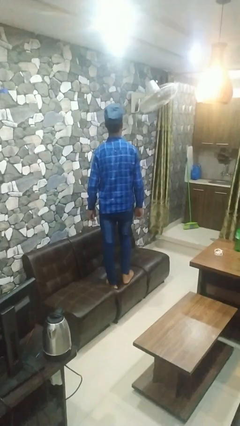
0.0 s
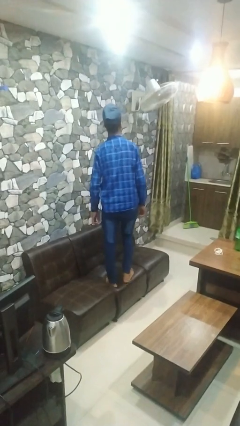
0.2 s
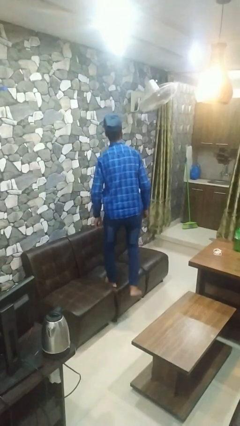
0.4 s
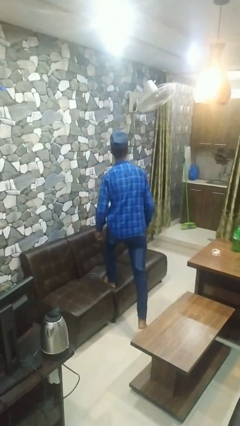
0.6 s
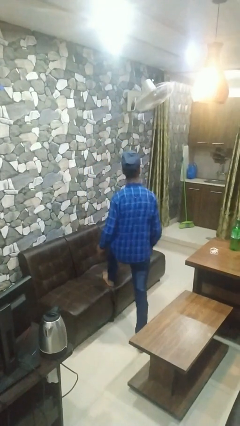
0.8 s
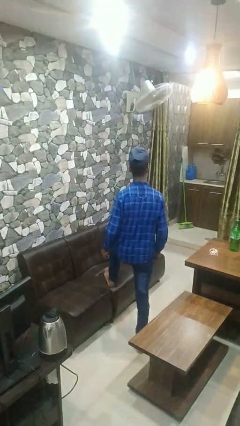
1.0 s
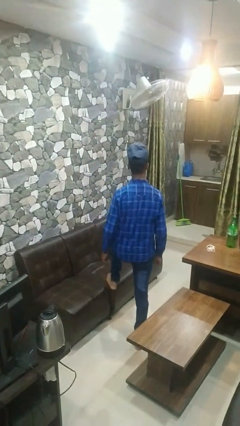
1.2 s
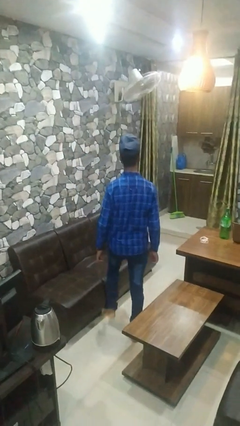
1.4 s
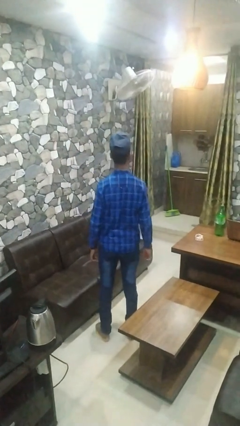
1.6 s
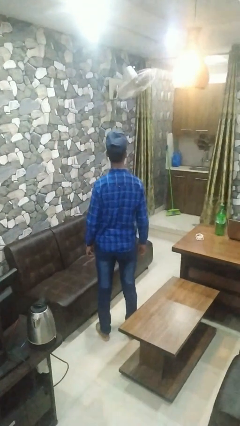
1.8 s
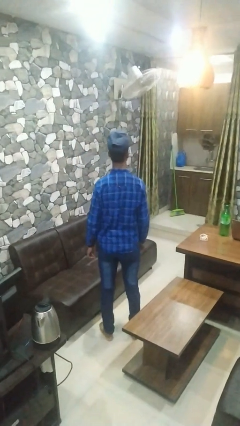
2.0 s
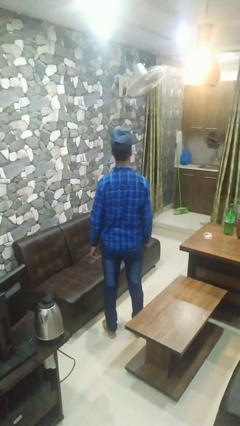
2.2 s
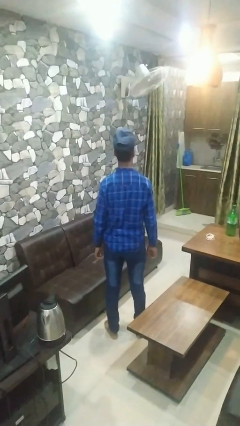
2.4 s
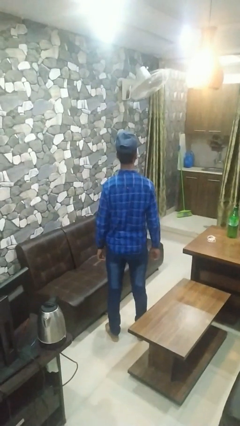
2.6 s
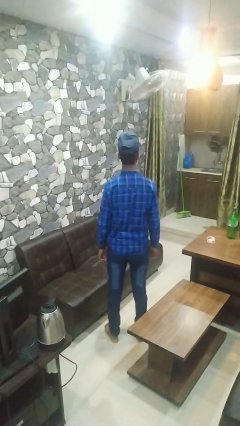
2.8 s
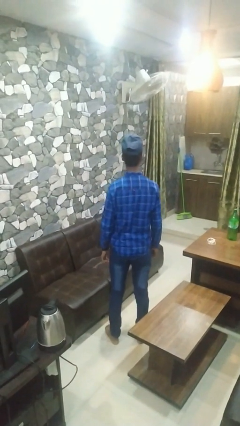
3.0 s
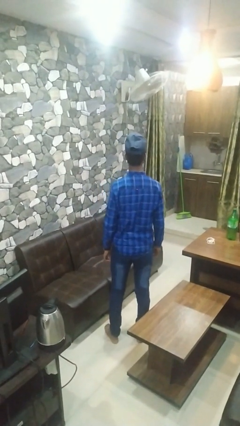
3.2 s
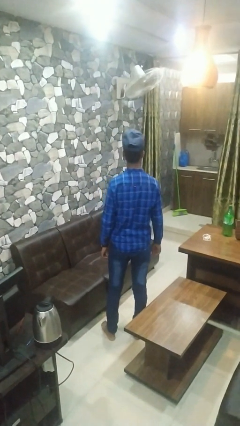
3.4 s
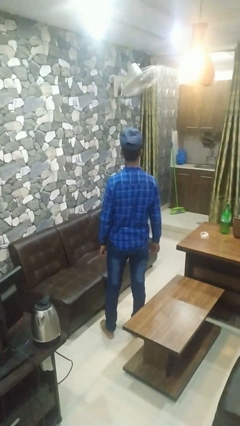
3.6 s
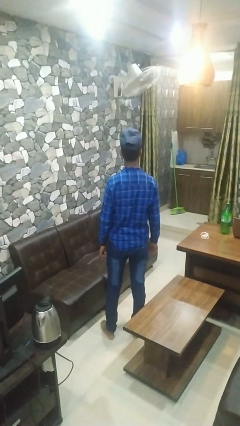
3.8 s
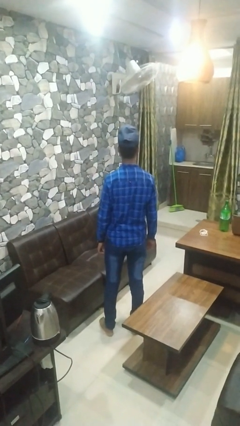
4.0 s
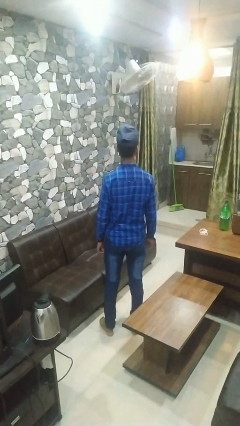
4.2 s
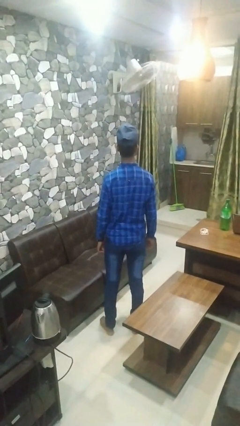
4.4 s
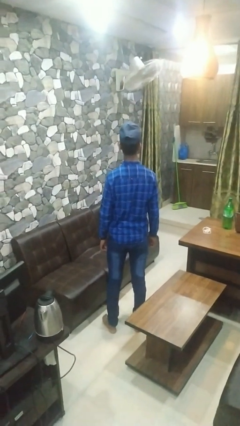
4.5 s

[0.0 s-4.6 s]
person climbs off couch

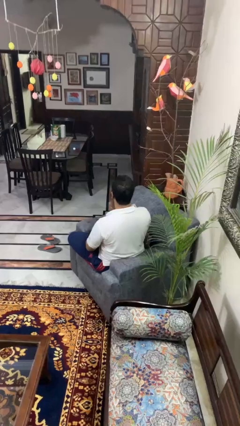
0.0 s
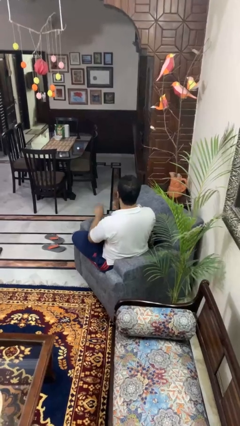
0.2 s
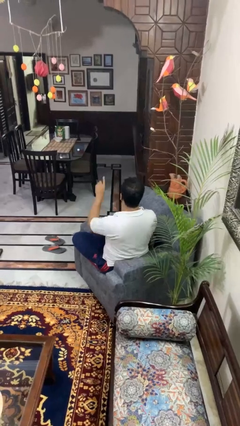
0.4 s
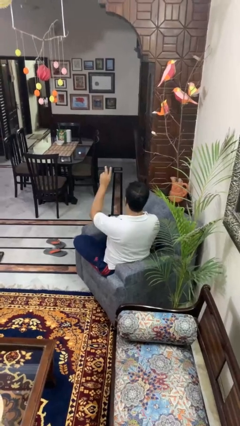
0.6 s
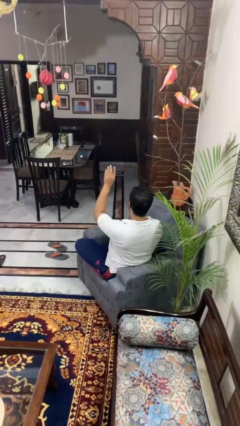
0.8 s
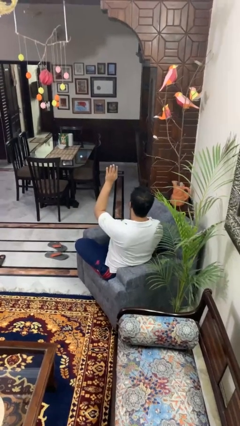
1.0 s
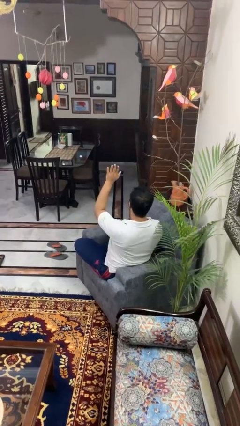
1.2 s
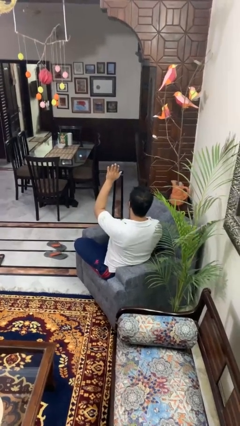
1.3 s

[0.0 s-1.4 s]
person gestures raise hand

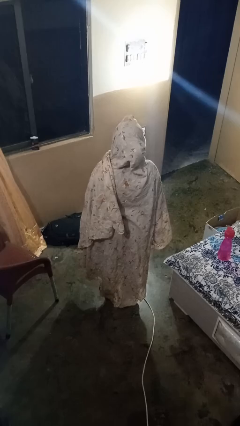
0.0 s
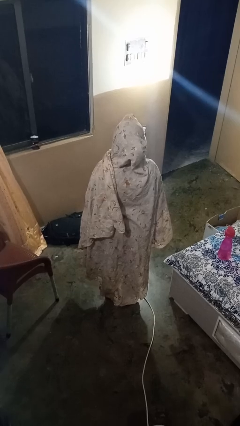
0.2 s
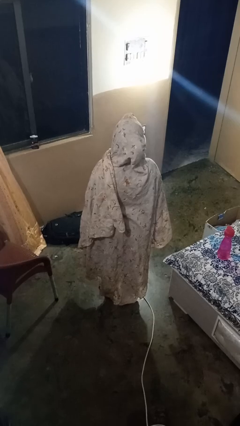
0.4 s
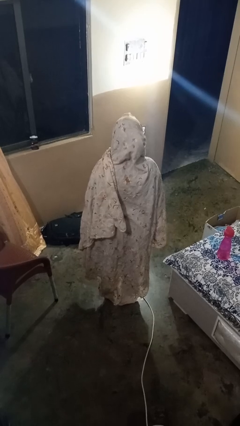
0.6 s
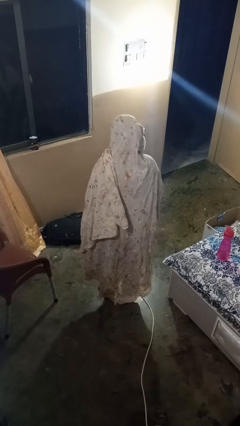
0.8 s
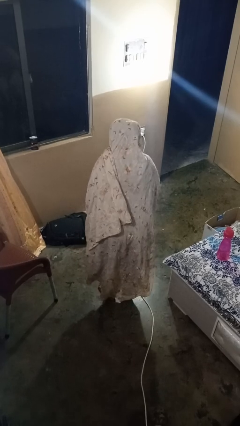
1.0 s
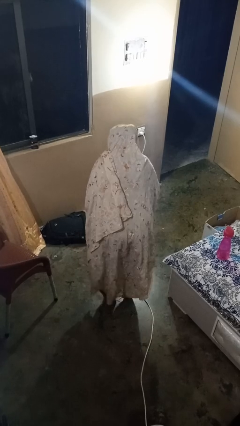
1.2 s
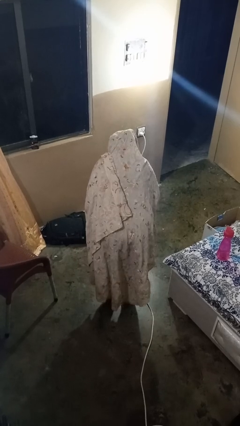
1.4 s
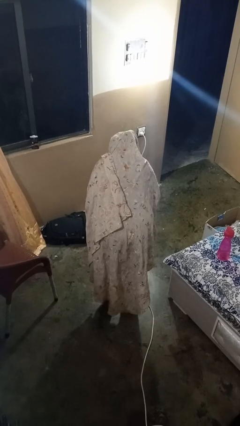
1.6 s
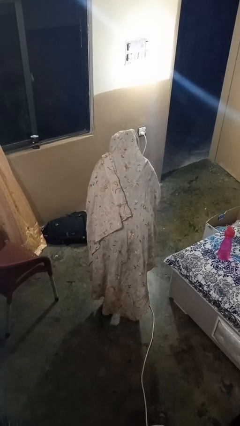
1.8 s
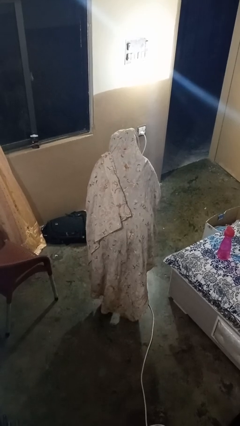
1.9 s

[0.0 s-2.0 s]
person bows

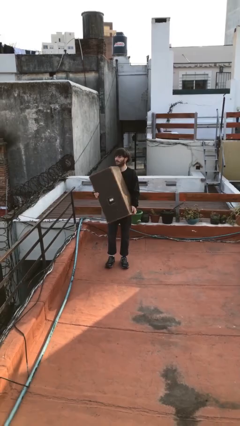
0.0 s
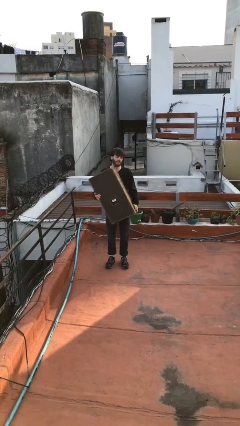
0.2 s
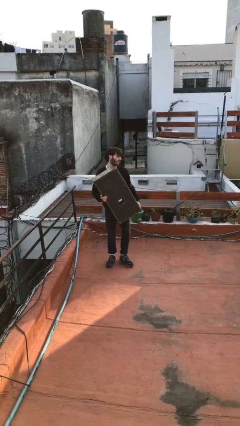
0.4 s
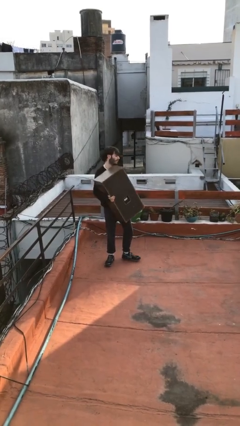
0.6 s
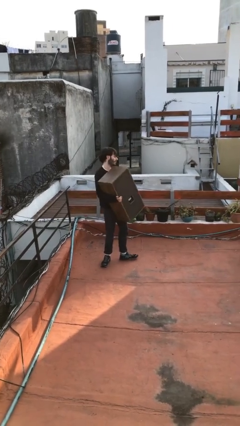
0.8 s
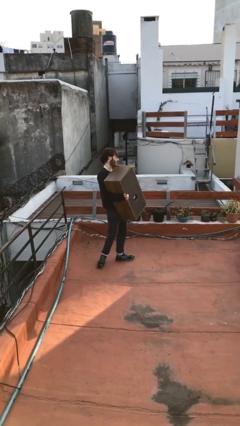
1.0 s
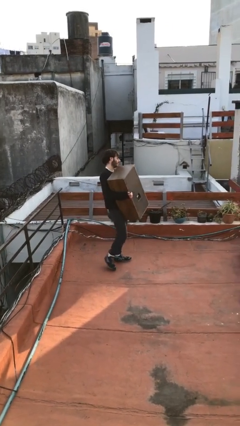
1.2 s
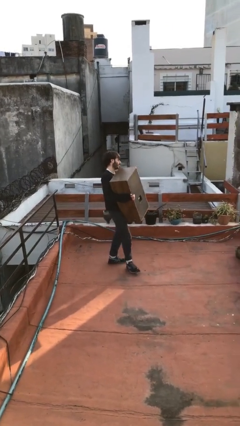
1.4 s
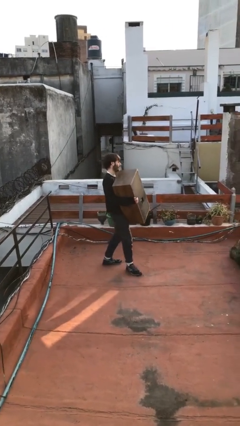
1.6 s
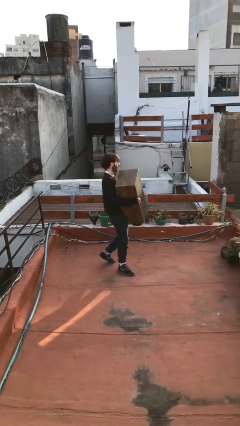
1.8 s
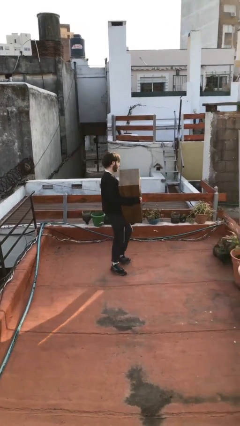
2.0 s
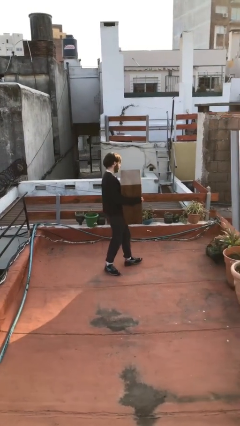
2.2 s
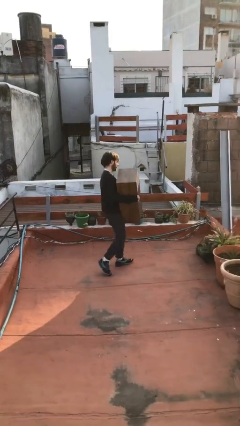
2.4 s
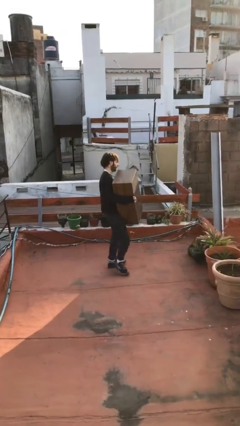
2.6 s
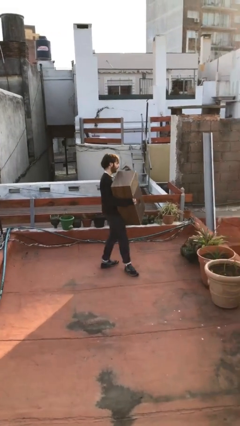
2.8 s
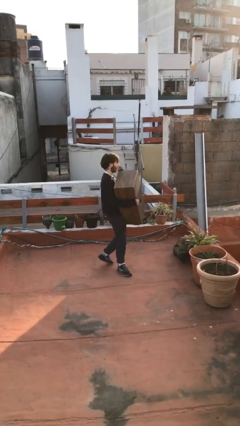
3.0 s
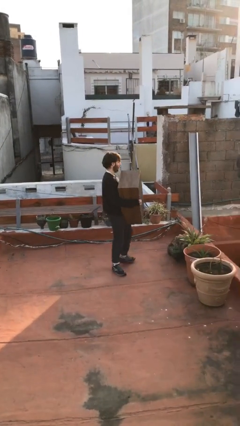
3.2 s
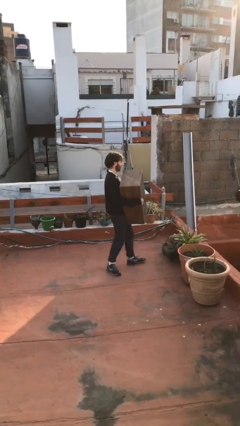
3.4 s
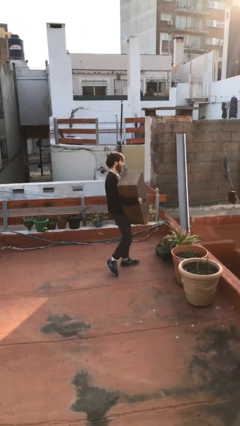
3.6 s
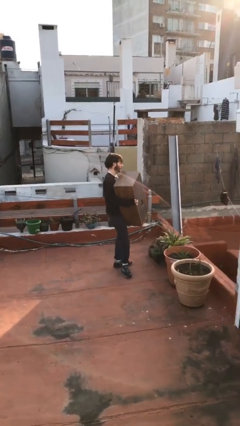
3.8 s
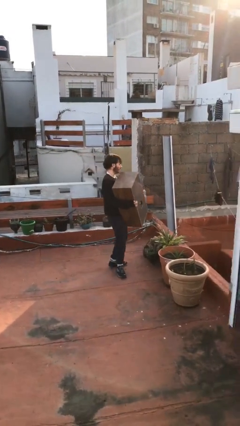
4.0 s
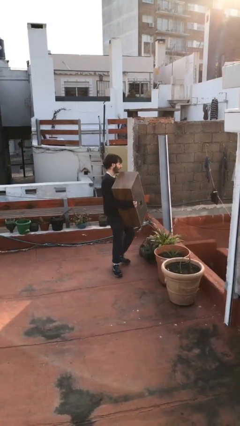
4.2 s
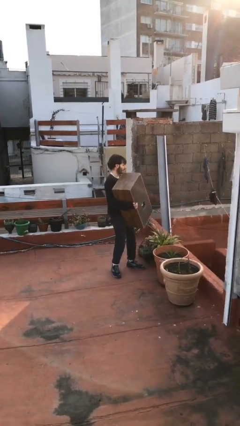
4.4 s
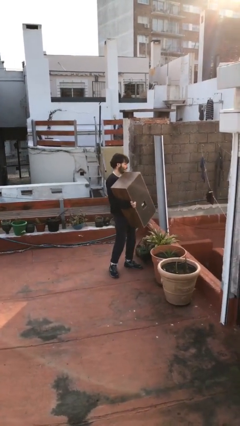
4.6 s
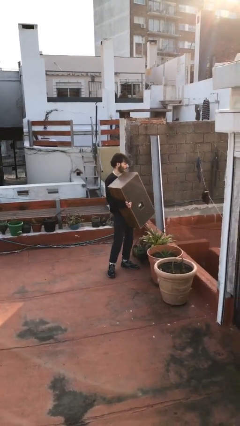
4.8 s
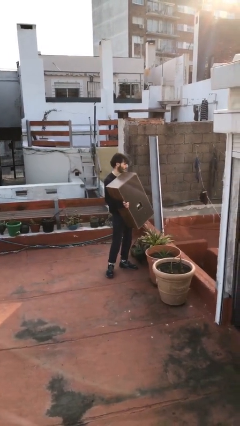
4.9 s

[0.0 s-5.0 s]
person carries furniture

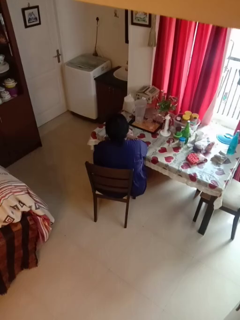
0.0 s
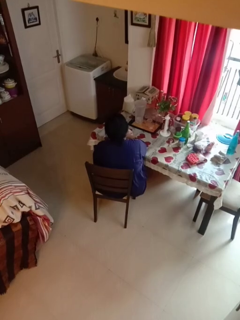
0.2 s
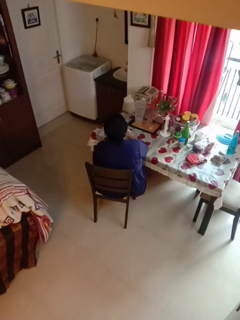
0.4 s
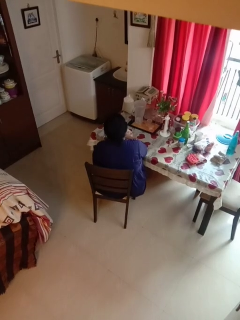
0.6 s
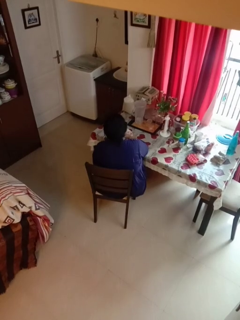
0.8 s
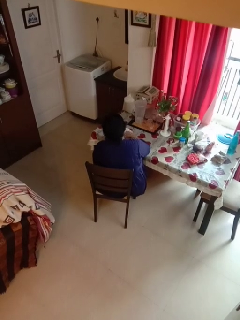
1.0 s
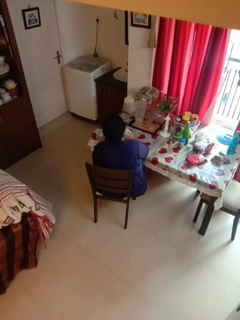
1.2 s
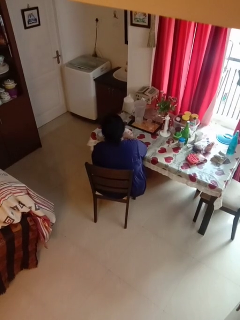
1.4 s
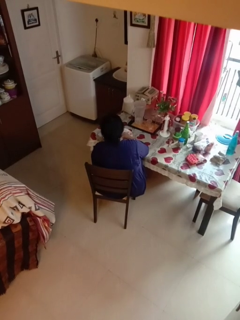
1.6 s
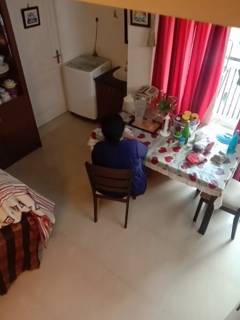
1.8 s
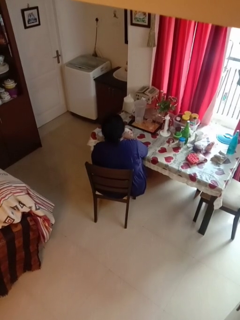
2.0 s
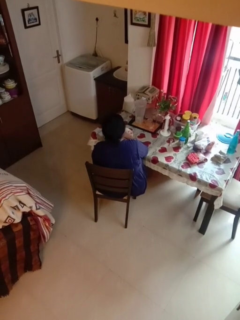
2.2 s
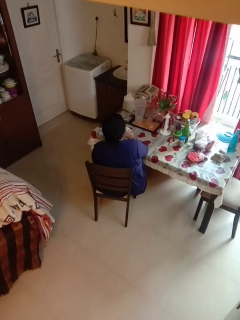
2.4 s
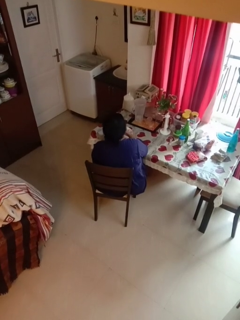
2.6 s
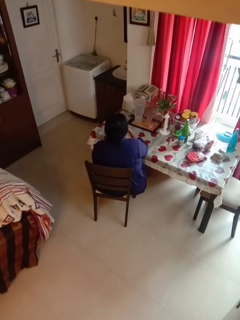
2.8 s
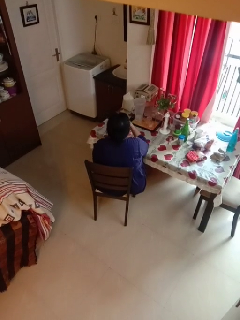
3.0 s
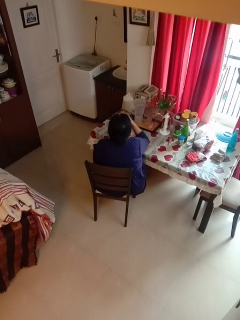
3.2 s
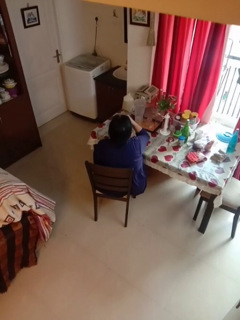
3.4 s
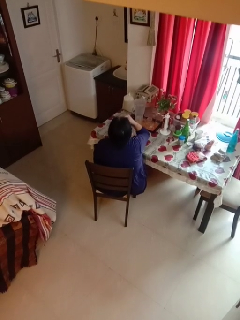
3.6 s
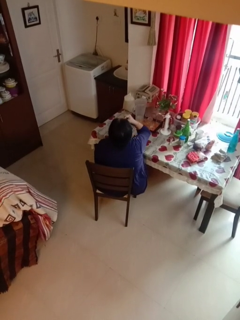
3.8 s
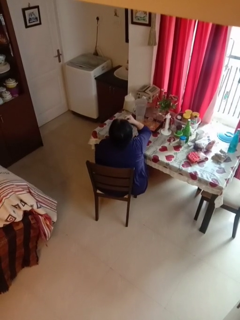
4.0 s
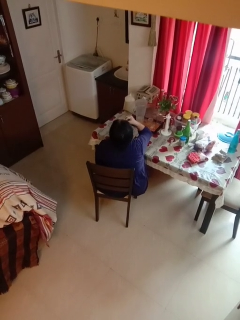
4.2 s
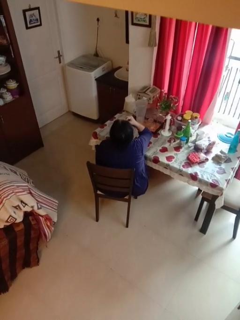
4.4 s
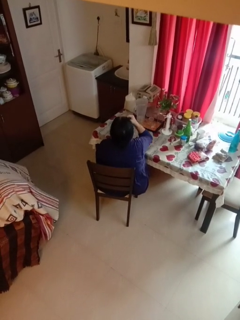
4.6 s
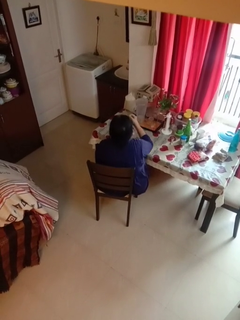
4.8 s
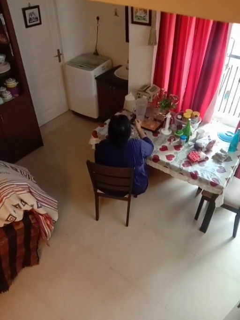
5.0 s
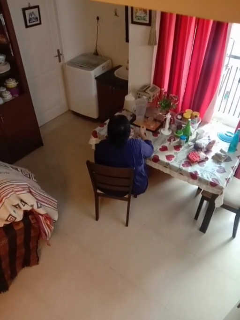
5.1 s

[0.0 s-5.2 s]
person eats with hands

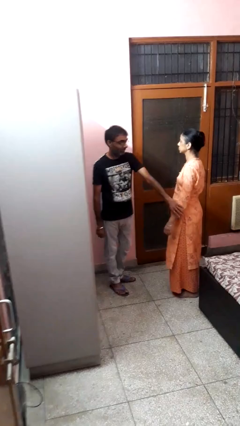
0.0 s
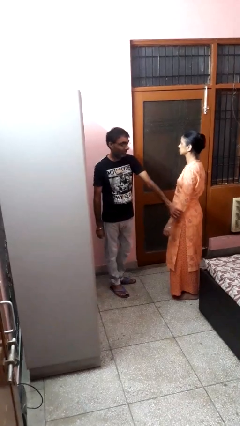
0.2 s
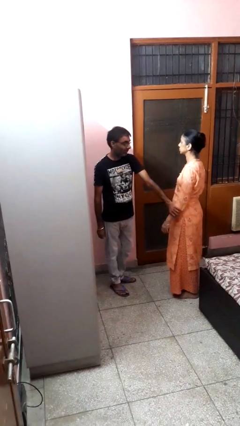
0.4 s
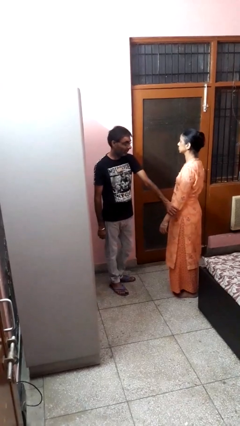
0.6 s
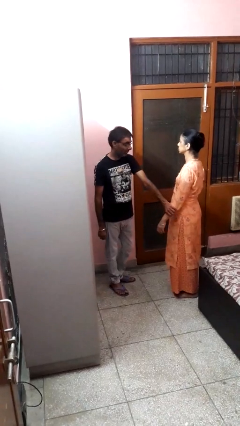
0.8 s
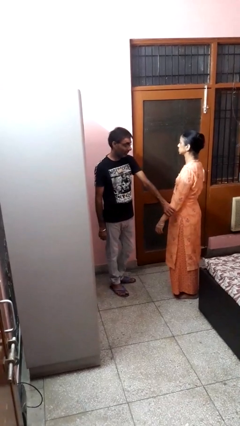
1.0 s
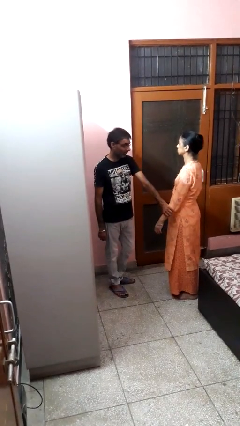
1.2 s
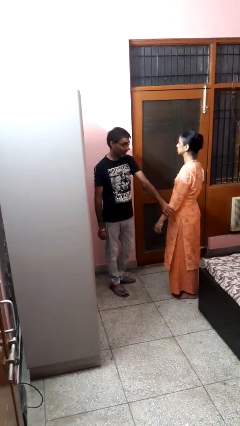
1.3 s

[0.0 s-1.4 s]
person grabs person by forearm
